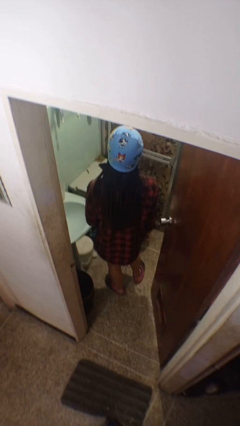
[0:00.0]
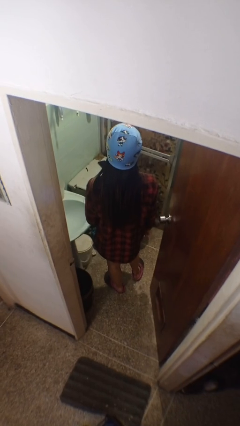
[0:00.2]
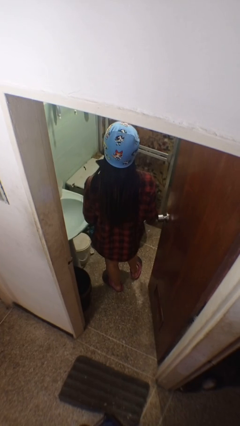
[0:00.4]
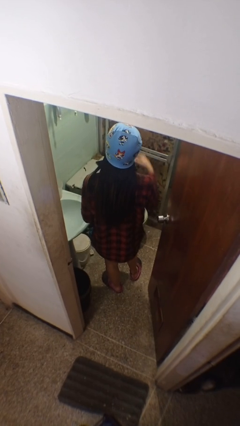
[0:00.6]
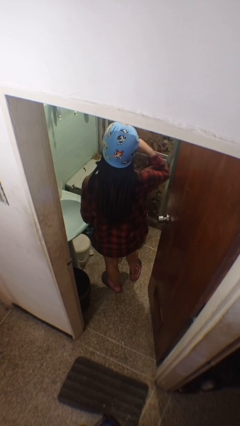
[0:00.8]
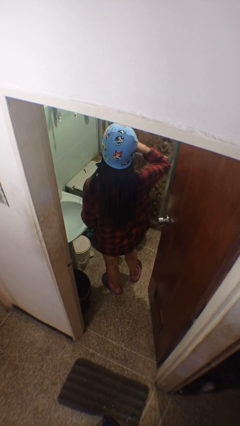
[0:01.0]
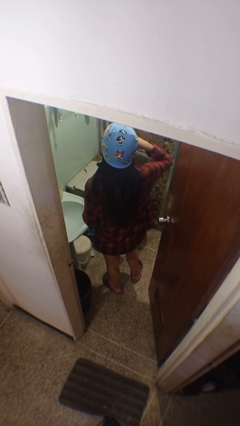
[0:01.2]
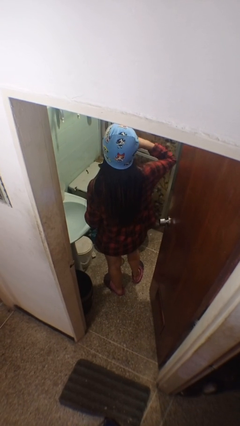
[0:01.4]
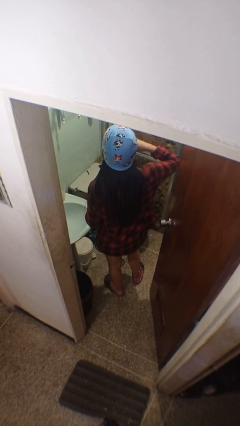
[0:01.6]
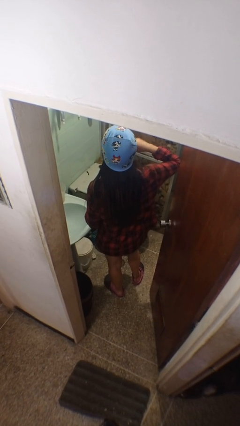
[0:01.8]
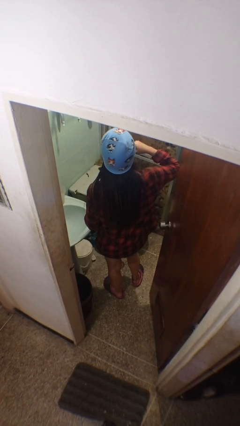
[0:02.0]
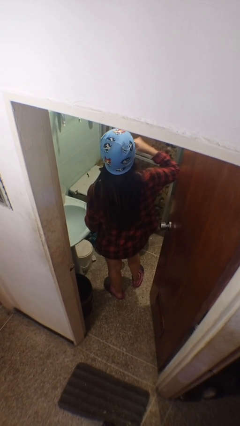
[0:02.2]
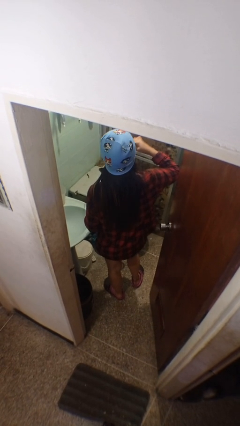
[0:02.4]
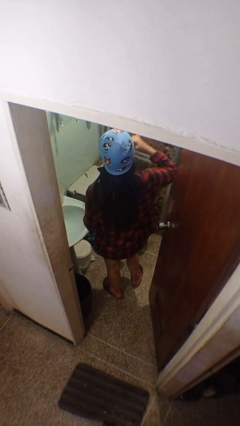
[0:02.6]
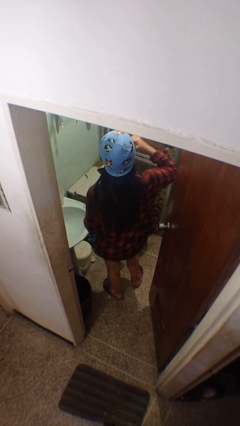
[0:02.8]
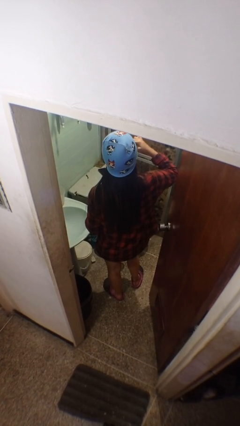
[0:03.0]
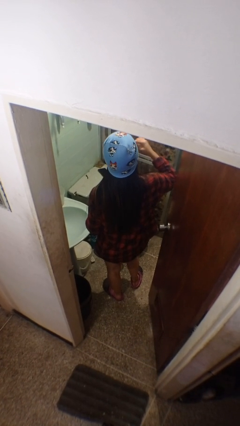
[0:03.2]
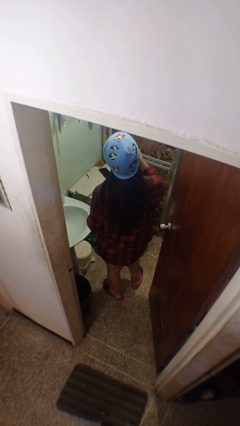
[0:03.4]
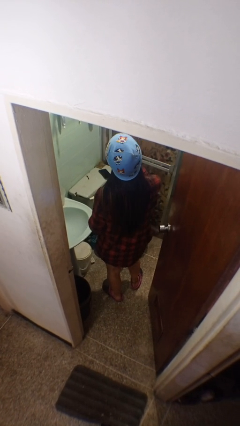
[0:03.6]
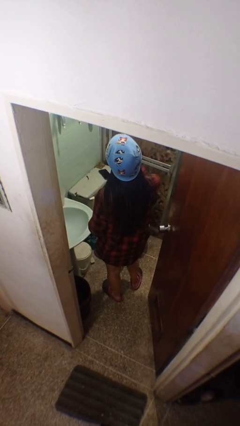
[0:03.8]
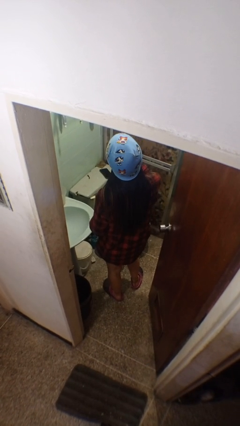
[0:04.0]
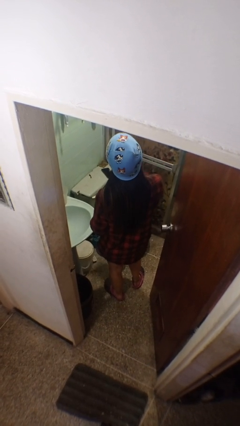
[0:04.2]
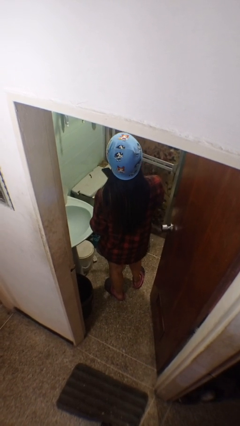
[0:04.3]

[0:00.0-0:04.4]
person brushes teeth

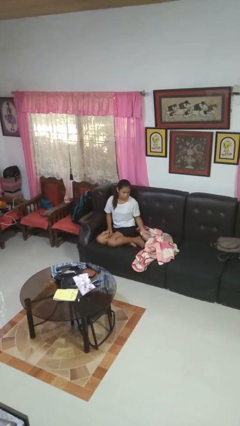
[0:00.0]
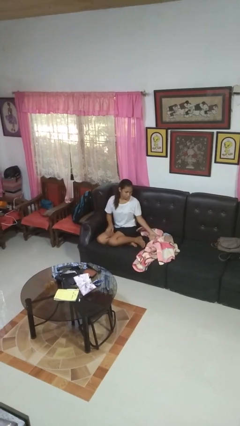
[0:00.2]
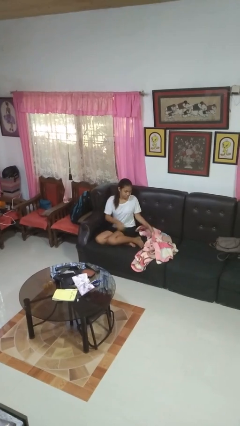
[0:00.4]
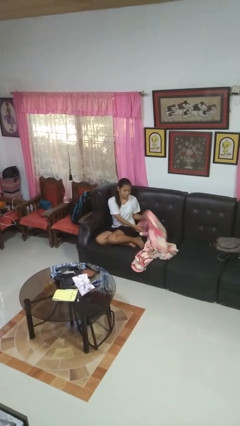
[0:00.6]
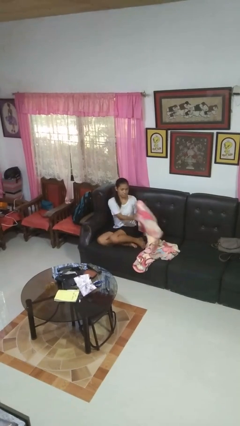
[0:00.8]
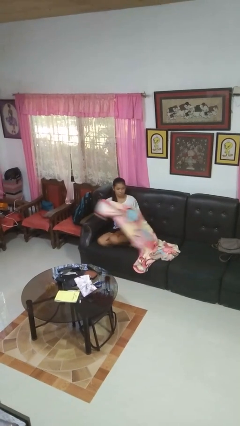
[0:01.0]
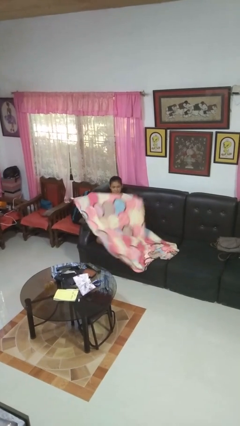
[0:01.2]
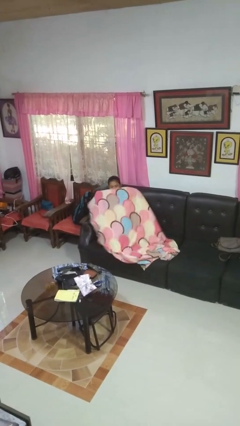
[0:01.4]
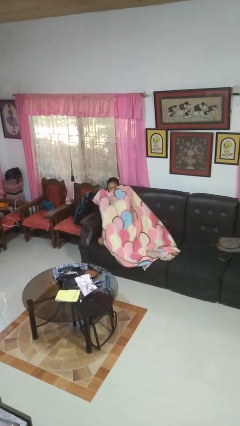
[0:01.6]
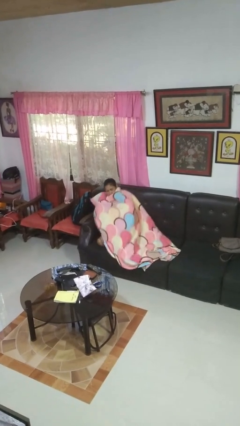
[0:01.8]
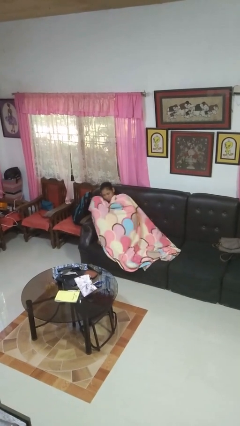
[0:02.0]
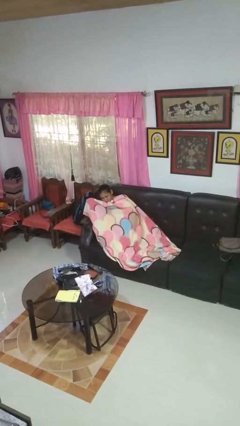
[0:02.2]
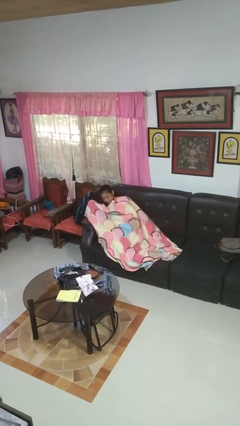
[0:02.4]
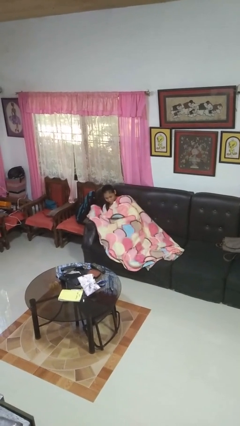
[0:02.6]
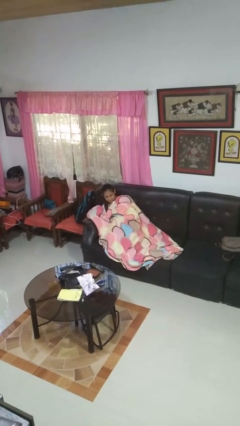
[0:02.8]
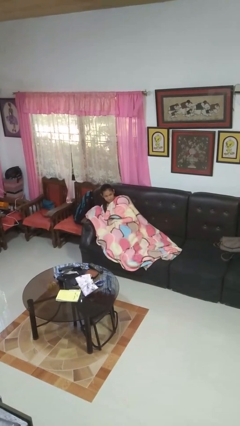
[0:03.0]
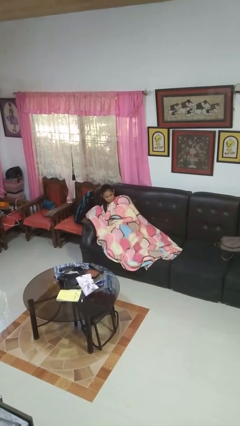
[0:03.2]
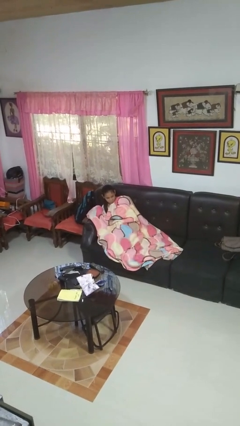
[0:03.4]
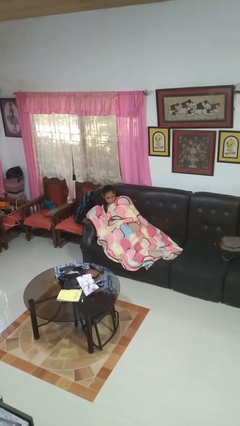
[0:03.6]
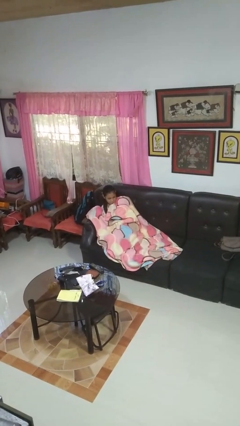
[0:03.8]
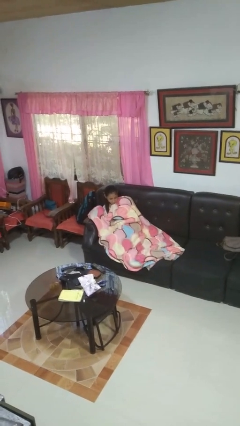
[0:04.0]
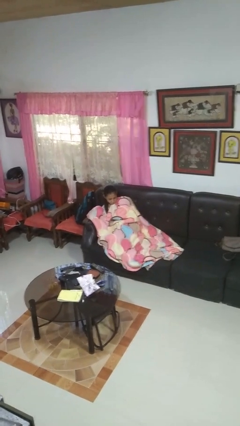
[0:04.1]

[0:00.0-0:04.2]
person covers with blanket

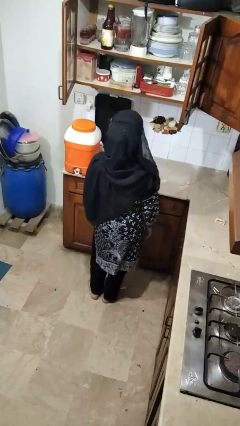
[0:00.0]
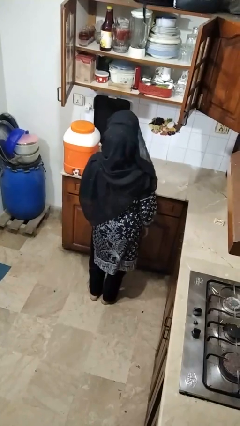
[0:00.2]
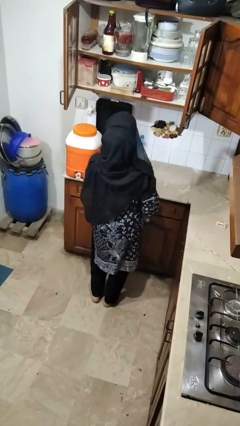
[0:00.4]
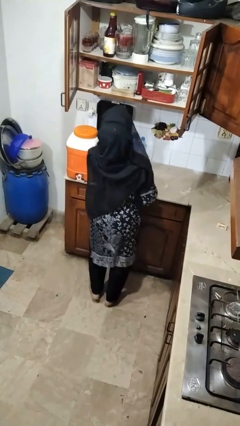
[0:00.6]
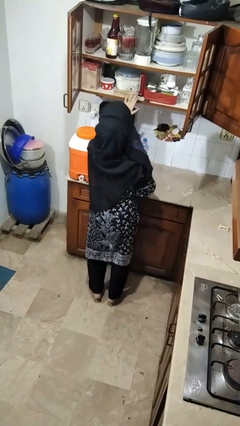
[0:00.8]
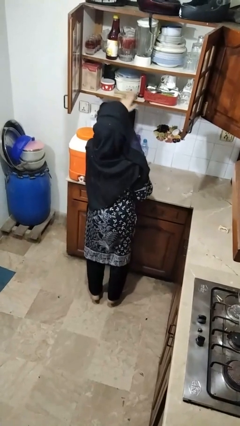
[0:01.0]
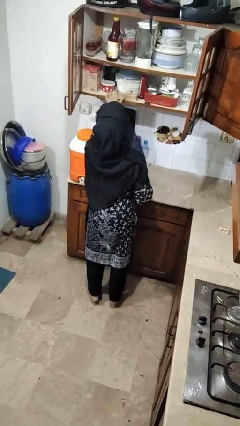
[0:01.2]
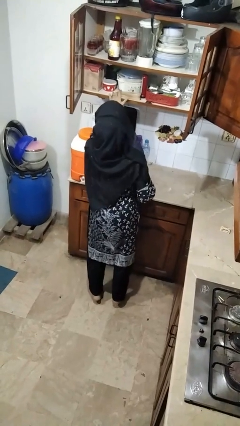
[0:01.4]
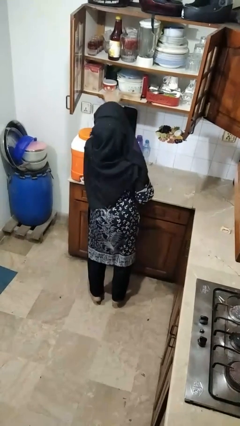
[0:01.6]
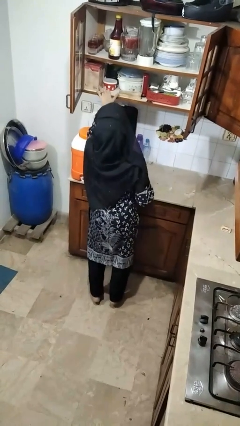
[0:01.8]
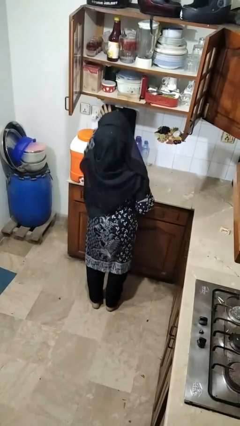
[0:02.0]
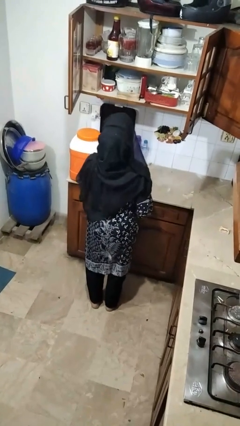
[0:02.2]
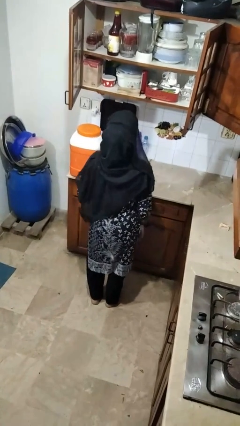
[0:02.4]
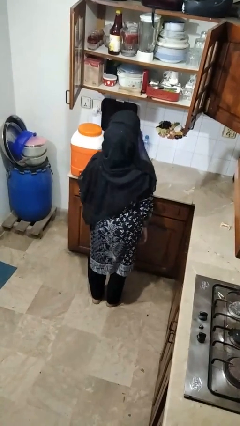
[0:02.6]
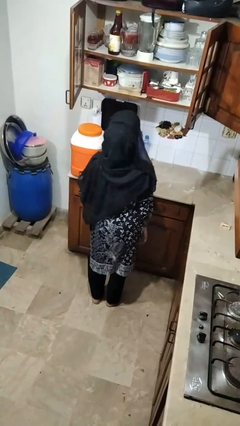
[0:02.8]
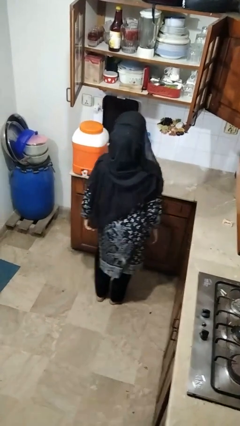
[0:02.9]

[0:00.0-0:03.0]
person searches in cabinet

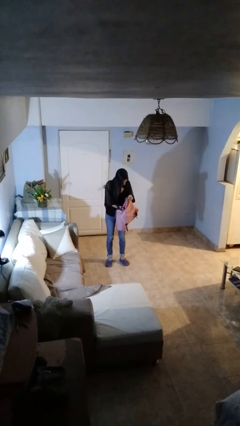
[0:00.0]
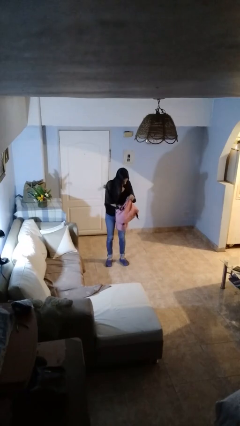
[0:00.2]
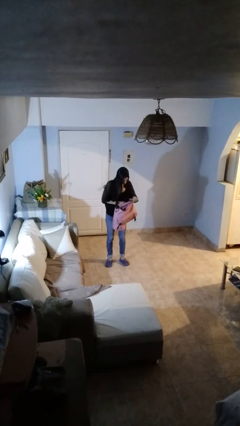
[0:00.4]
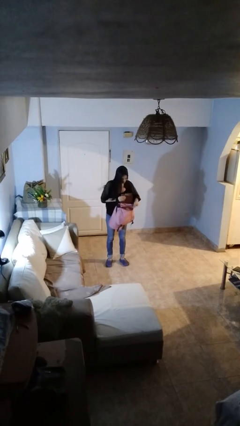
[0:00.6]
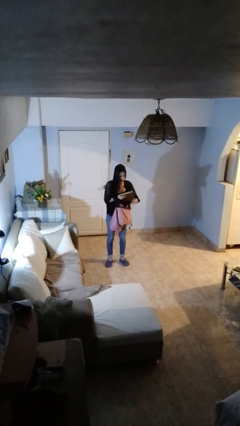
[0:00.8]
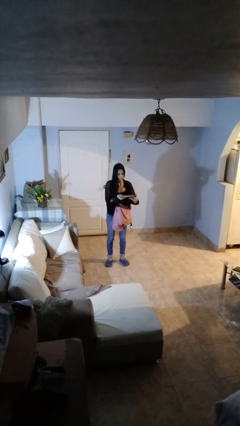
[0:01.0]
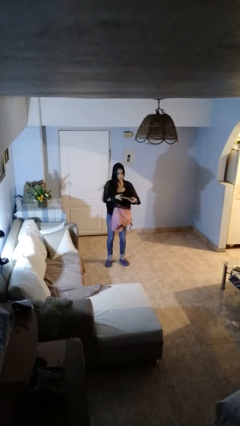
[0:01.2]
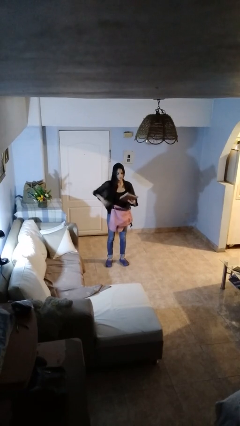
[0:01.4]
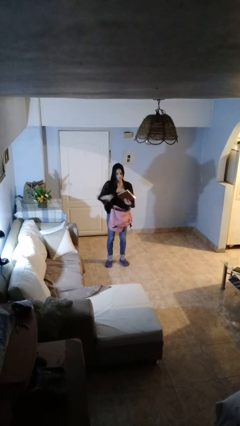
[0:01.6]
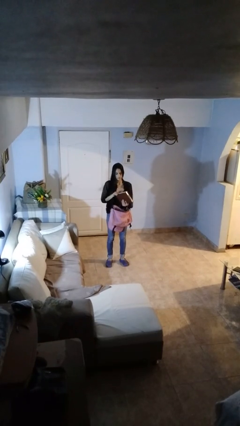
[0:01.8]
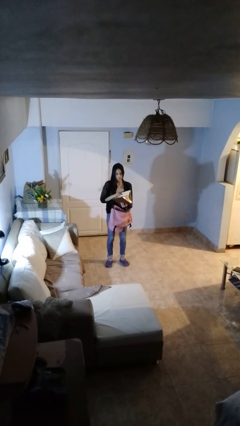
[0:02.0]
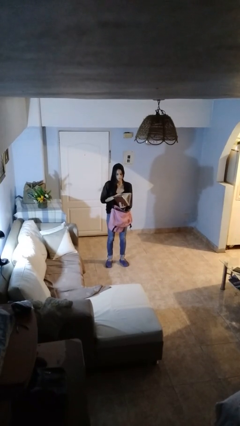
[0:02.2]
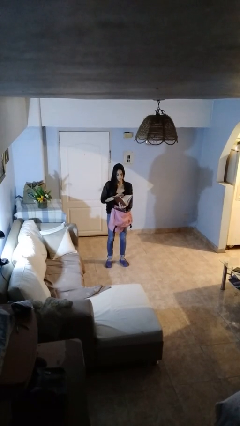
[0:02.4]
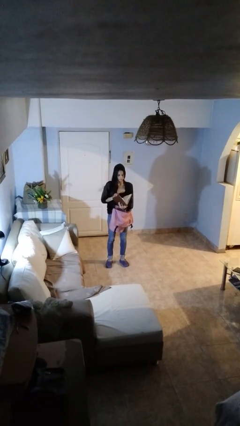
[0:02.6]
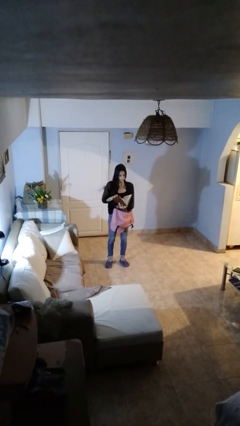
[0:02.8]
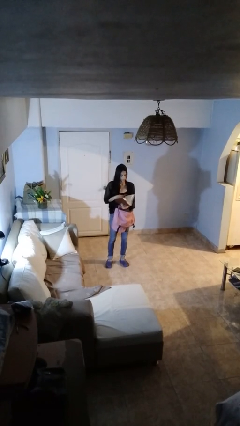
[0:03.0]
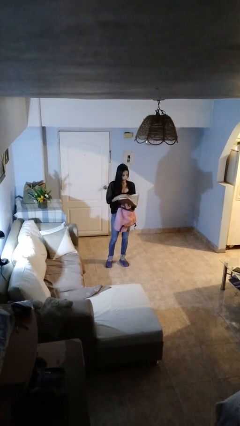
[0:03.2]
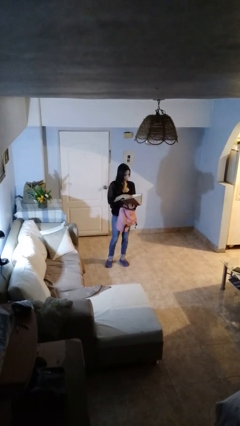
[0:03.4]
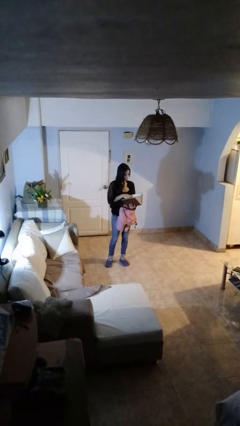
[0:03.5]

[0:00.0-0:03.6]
person takes object from backpack

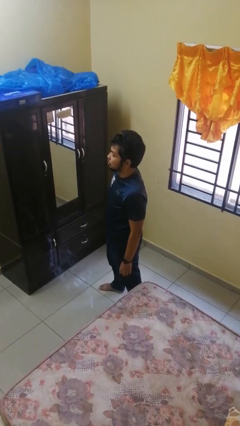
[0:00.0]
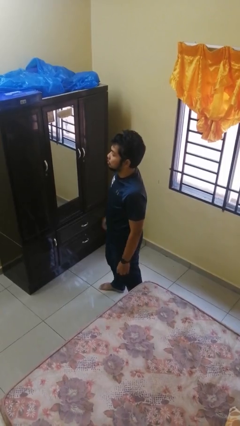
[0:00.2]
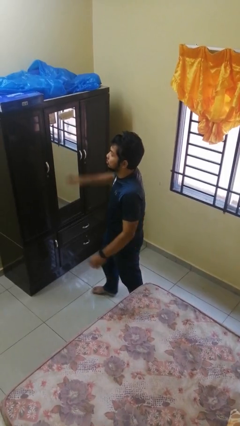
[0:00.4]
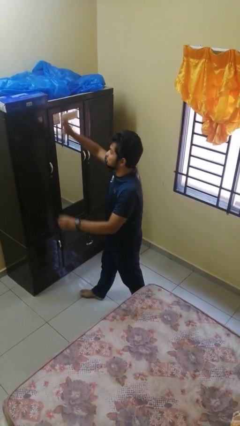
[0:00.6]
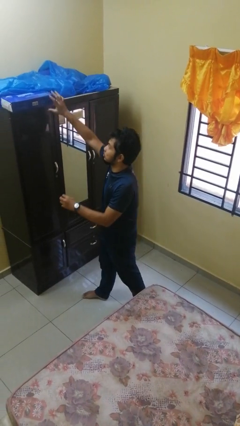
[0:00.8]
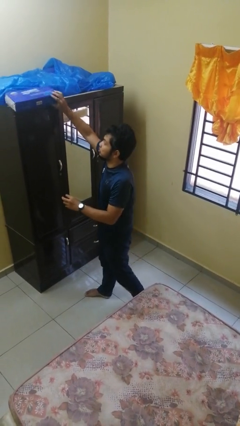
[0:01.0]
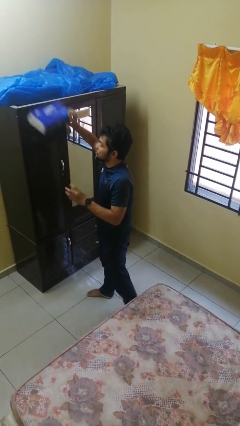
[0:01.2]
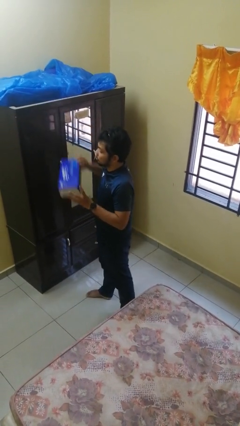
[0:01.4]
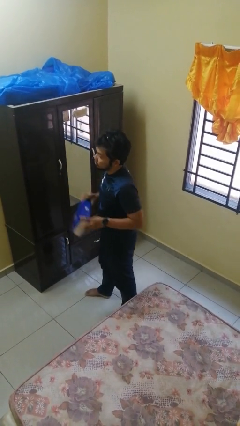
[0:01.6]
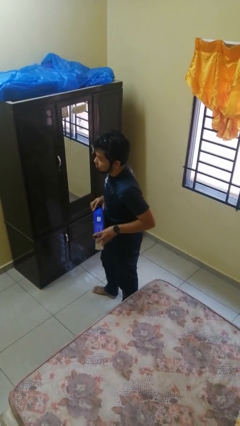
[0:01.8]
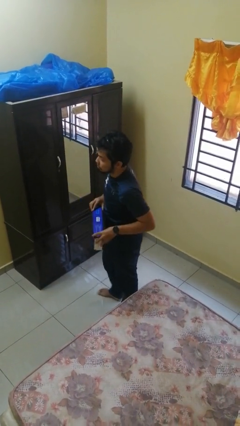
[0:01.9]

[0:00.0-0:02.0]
person picks up object from countertop

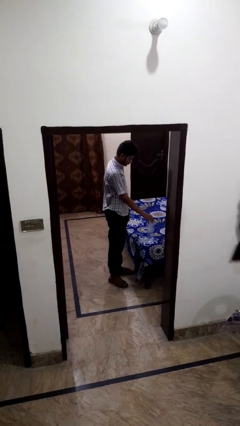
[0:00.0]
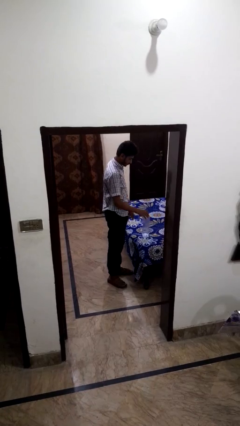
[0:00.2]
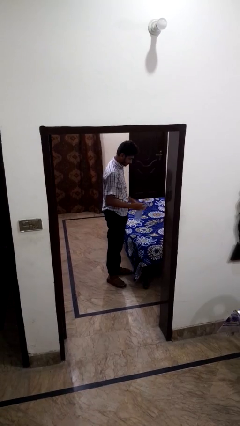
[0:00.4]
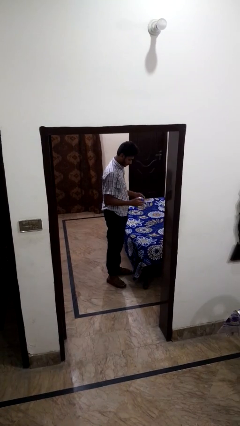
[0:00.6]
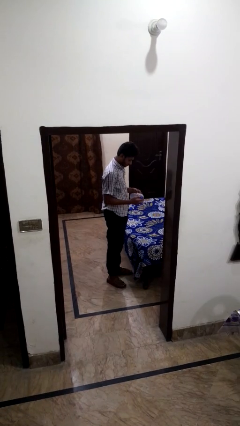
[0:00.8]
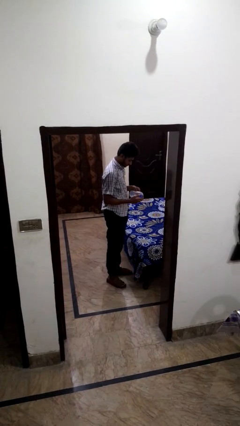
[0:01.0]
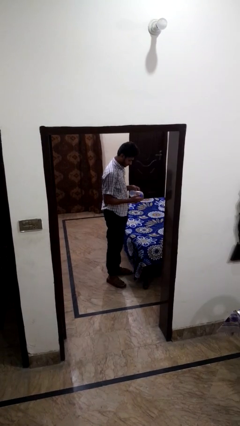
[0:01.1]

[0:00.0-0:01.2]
person picks up object from bed
